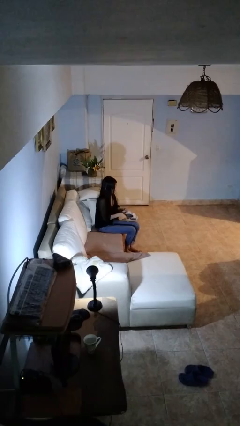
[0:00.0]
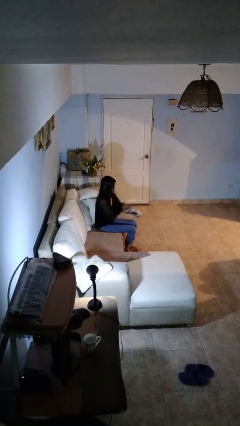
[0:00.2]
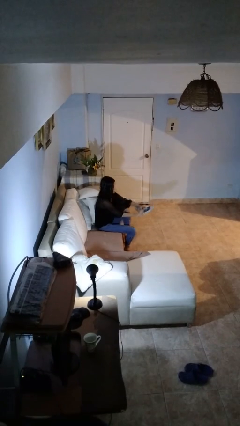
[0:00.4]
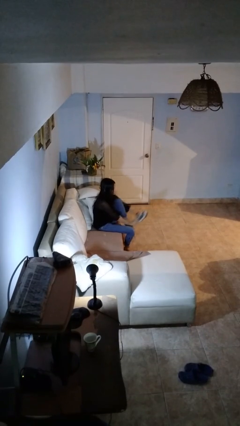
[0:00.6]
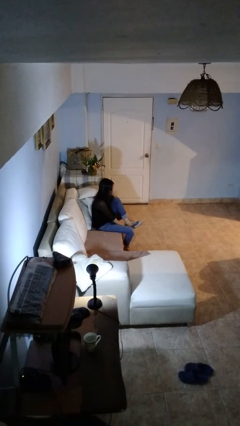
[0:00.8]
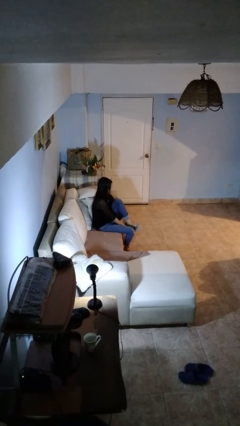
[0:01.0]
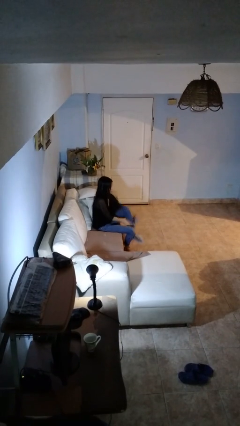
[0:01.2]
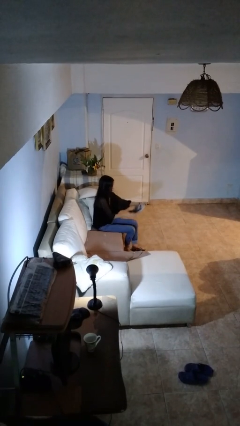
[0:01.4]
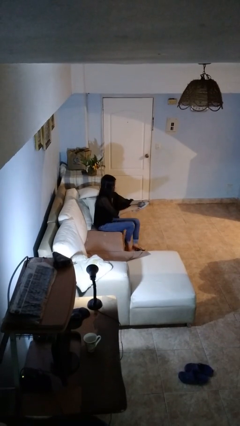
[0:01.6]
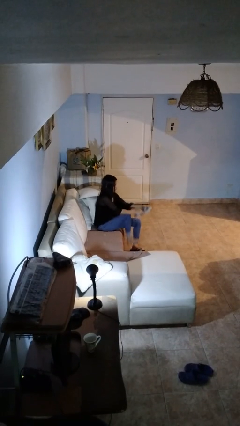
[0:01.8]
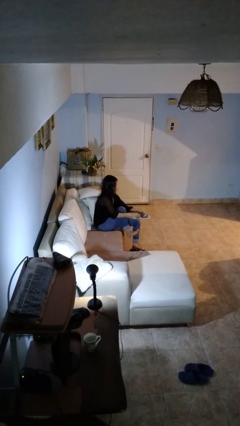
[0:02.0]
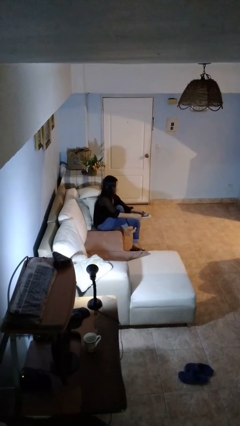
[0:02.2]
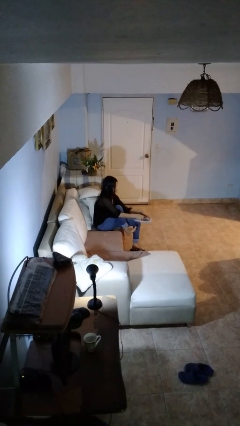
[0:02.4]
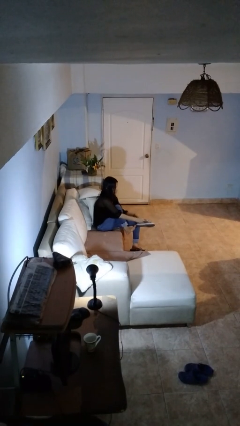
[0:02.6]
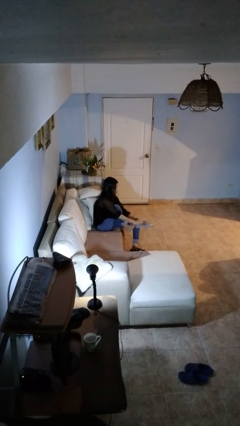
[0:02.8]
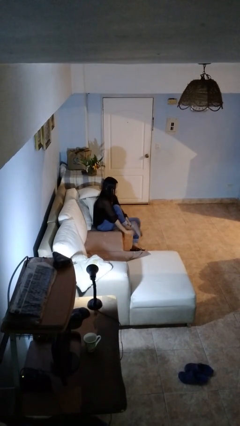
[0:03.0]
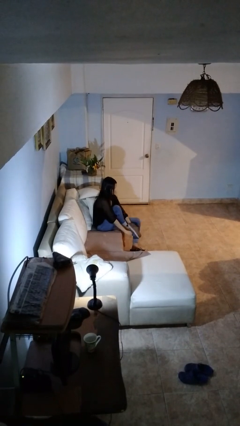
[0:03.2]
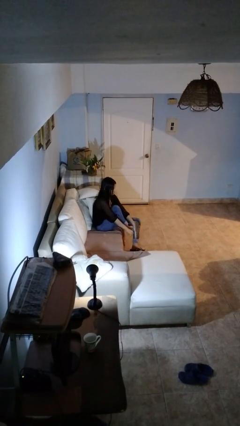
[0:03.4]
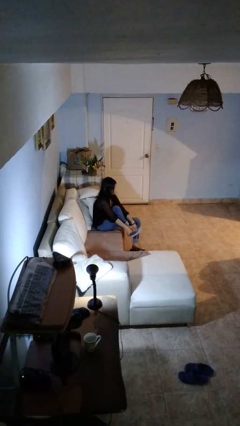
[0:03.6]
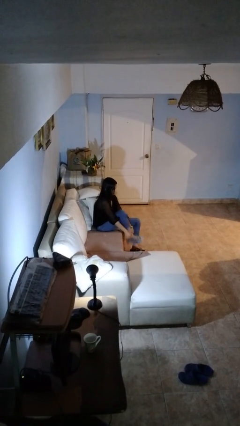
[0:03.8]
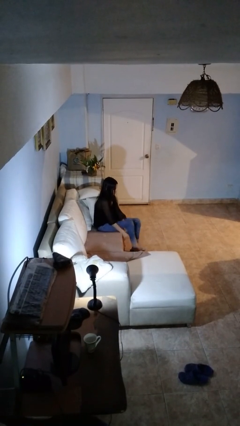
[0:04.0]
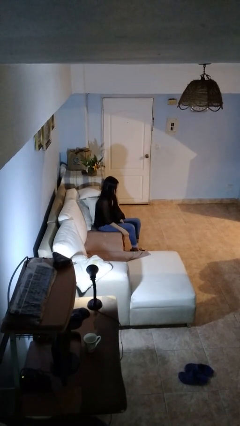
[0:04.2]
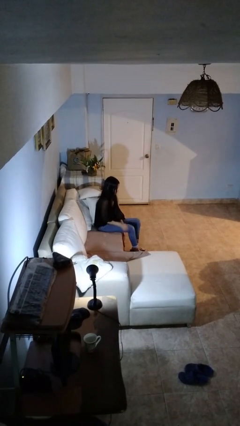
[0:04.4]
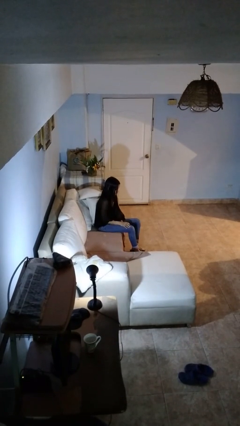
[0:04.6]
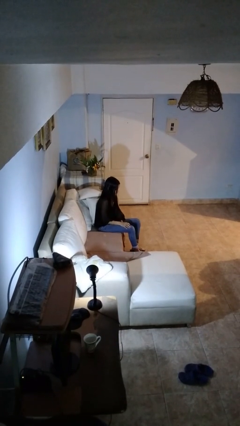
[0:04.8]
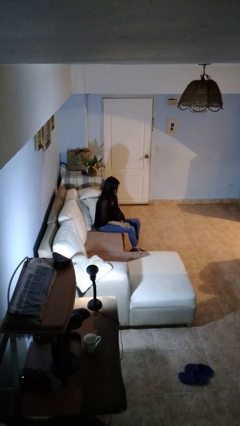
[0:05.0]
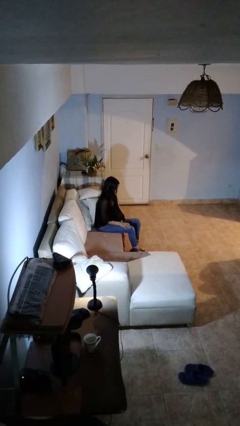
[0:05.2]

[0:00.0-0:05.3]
person puts on shoes

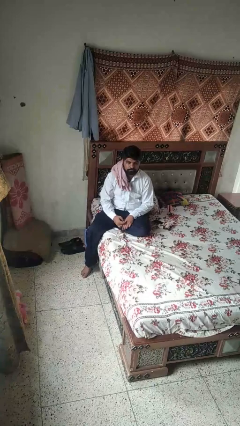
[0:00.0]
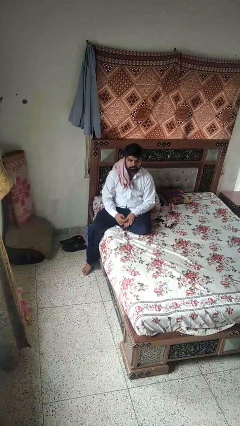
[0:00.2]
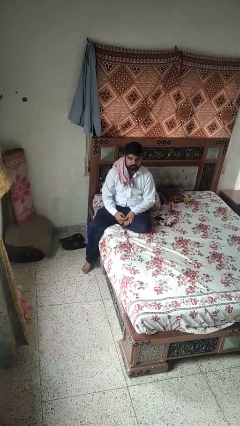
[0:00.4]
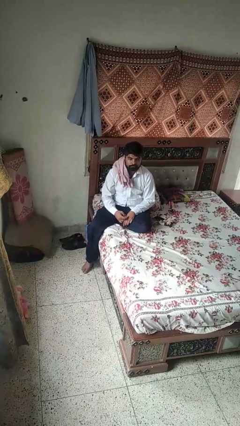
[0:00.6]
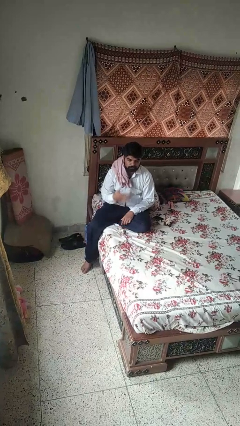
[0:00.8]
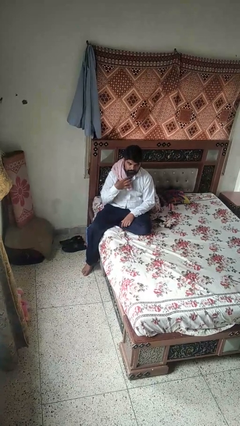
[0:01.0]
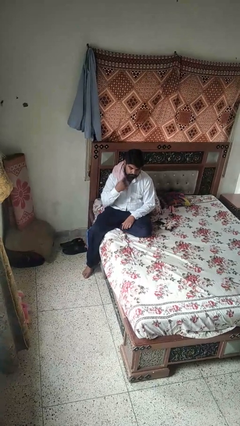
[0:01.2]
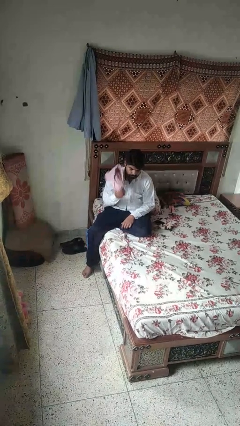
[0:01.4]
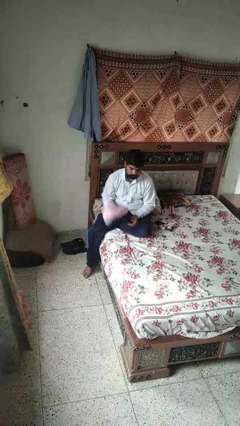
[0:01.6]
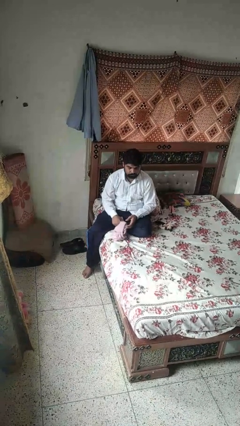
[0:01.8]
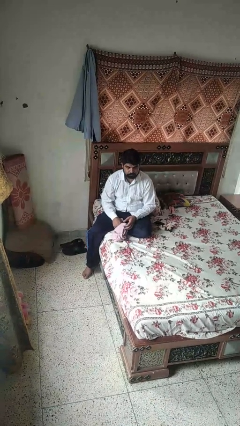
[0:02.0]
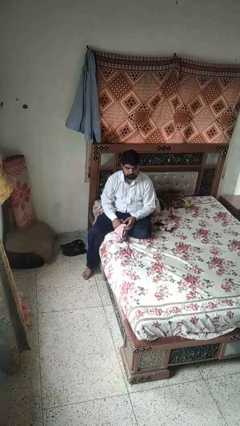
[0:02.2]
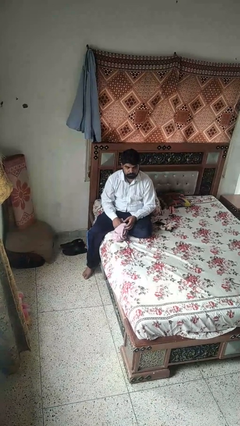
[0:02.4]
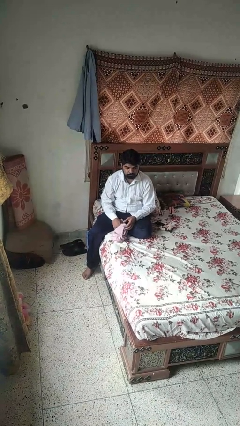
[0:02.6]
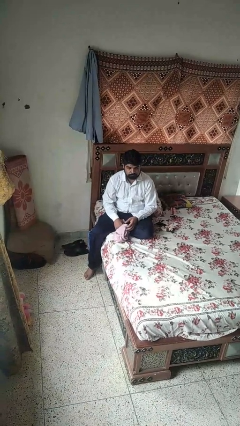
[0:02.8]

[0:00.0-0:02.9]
person takes off scarf

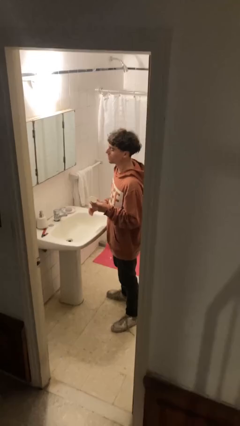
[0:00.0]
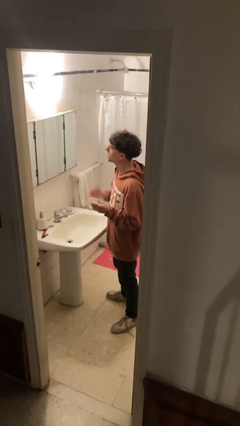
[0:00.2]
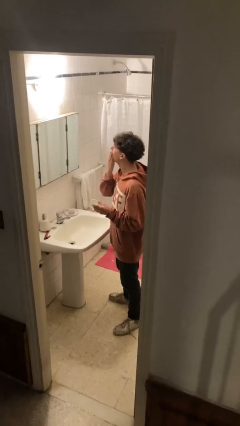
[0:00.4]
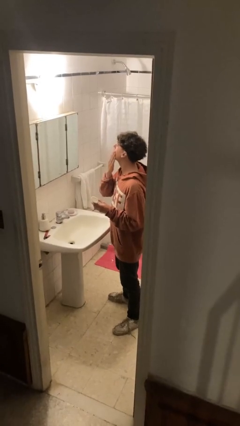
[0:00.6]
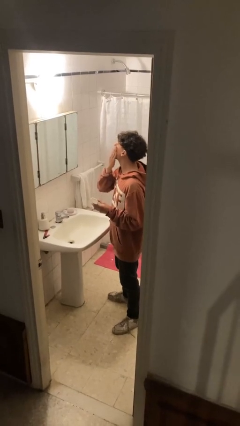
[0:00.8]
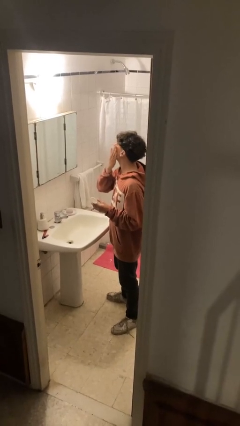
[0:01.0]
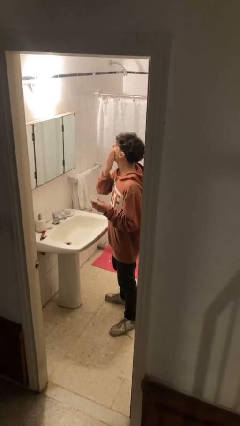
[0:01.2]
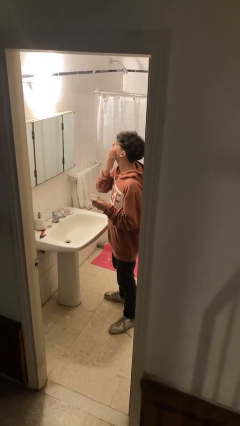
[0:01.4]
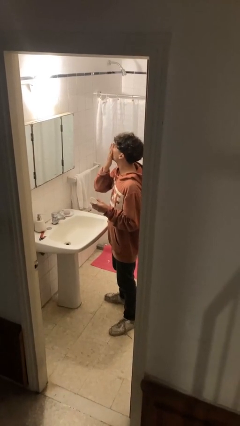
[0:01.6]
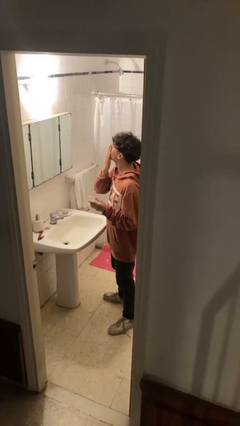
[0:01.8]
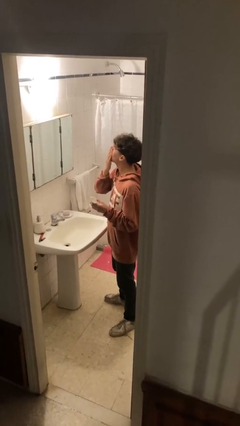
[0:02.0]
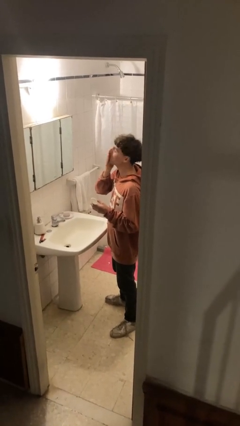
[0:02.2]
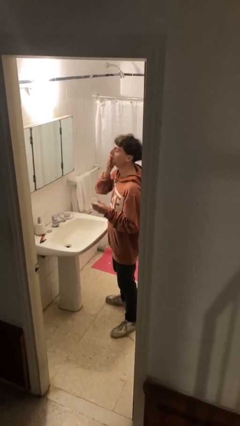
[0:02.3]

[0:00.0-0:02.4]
person applies foundation makeup

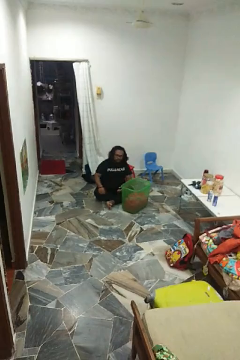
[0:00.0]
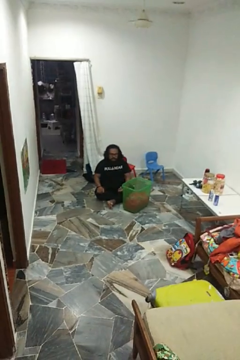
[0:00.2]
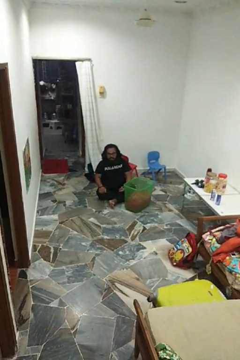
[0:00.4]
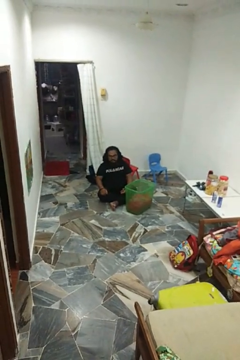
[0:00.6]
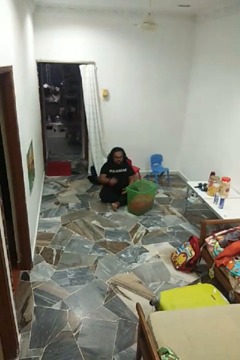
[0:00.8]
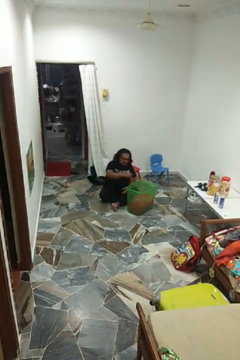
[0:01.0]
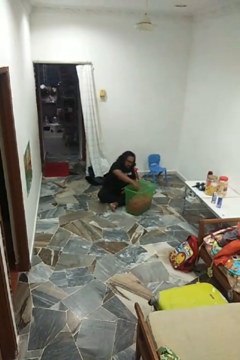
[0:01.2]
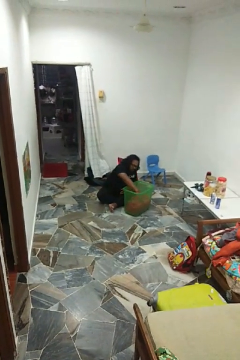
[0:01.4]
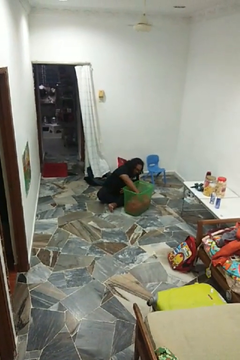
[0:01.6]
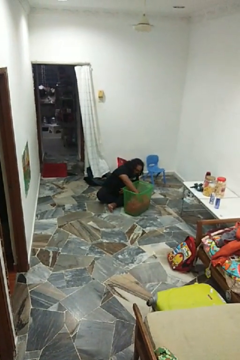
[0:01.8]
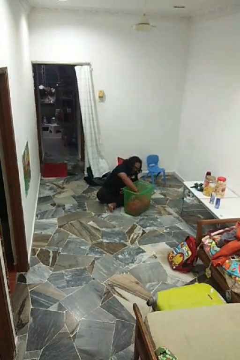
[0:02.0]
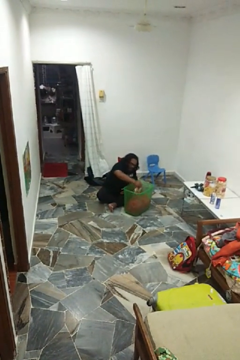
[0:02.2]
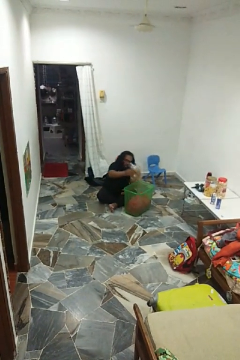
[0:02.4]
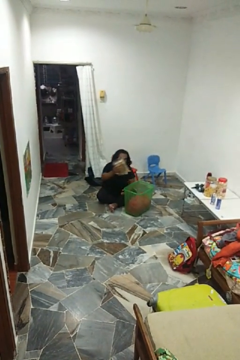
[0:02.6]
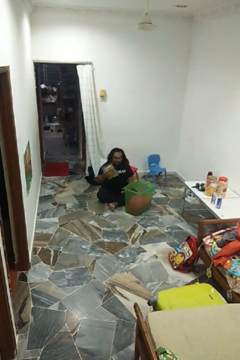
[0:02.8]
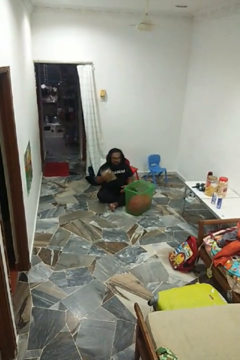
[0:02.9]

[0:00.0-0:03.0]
person takes object from basket

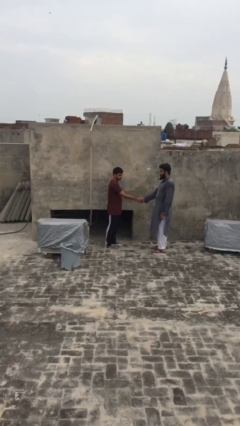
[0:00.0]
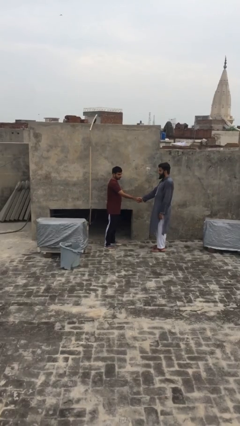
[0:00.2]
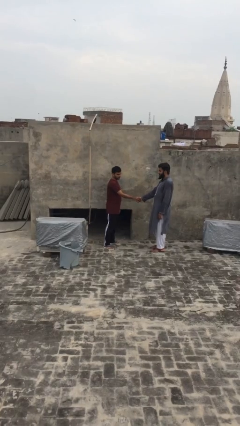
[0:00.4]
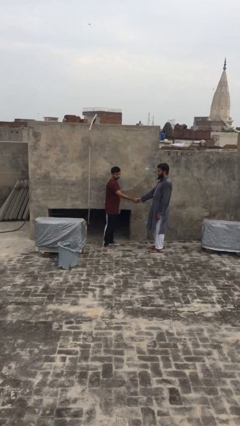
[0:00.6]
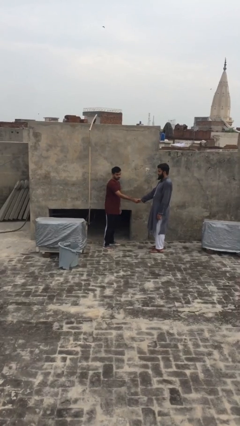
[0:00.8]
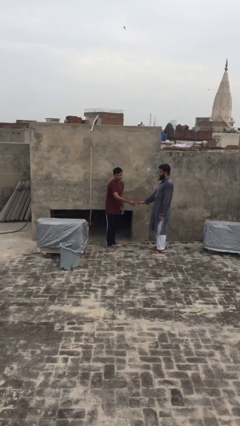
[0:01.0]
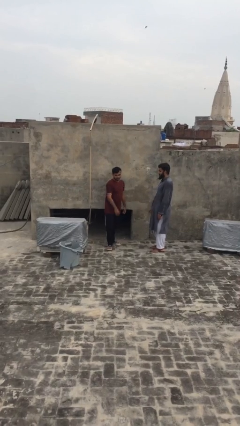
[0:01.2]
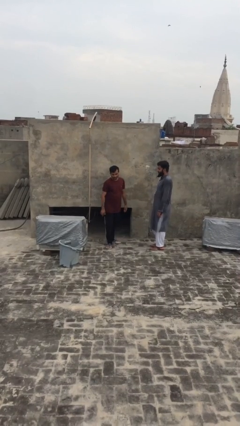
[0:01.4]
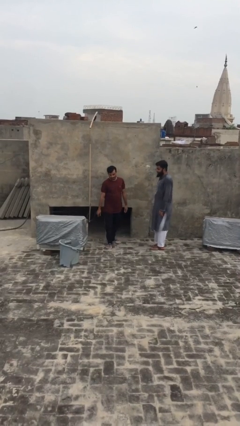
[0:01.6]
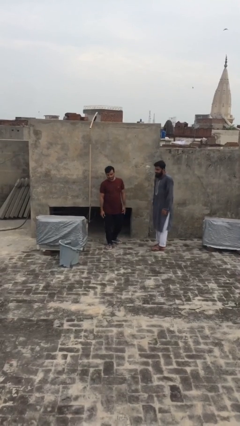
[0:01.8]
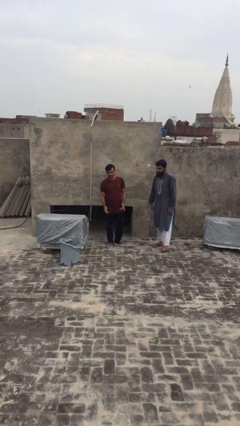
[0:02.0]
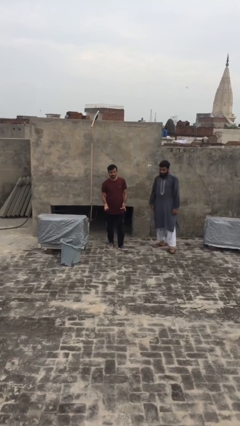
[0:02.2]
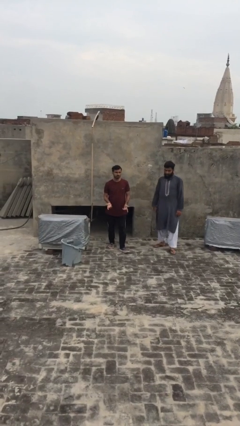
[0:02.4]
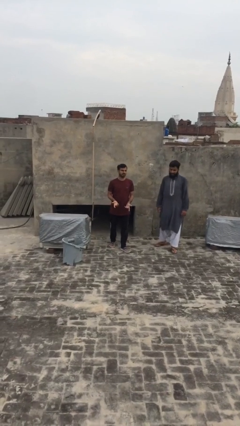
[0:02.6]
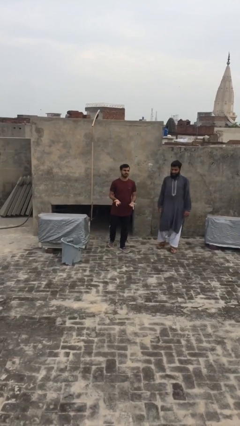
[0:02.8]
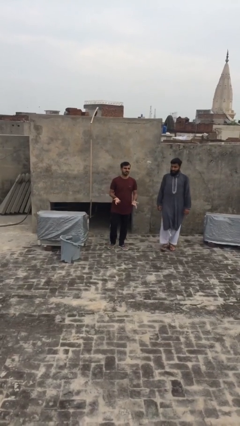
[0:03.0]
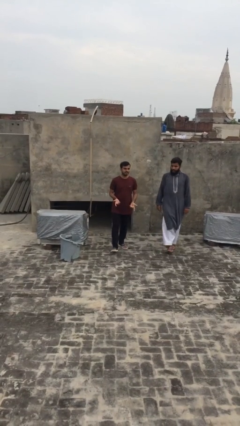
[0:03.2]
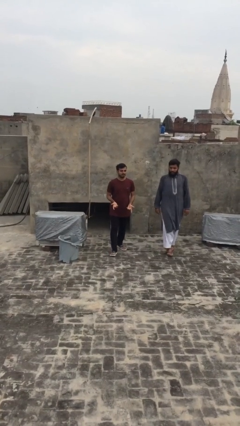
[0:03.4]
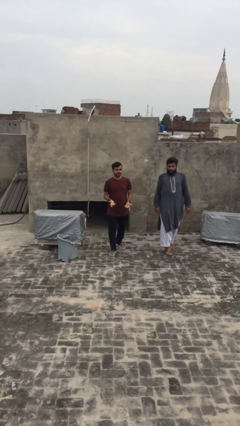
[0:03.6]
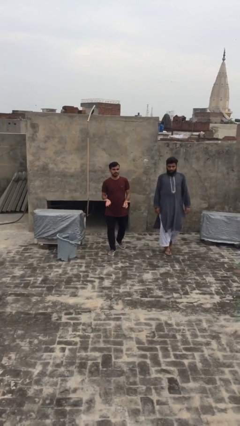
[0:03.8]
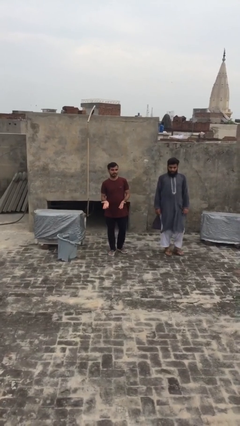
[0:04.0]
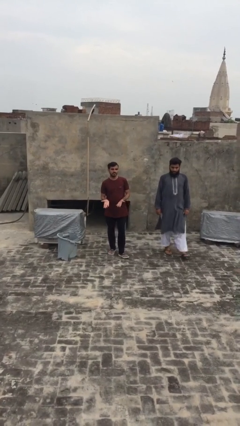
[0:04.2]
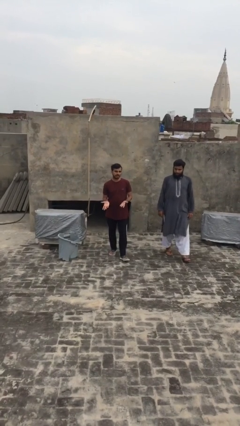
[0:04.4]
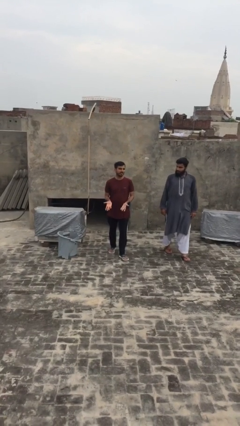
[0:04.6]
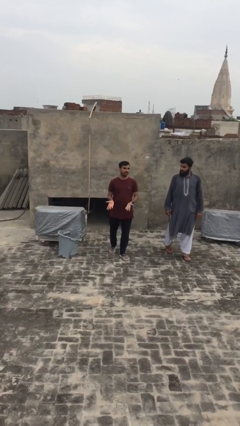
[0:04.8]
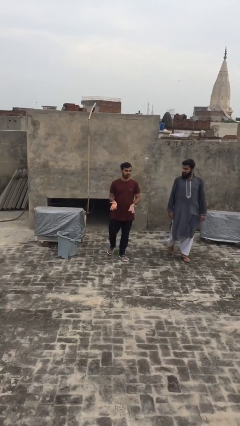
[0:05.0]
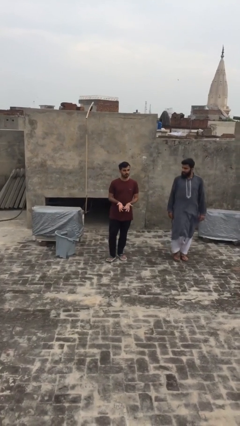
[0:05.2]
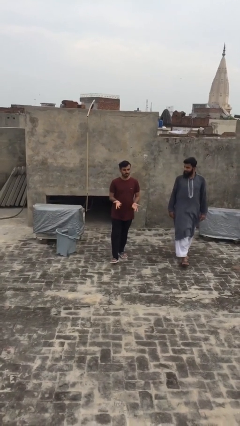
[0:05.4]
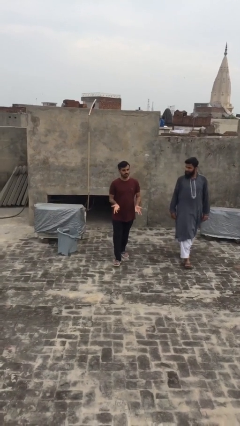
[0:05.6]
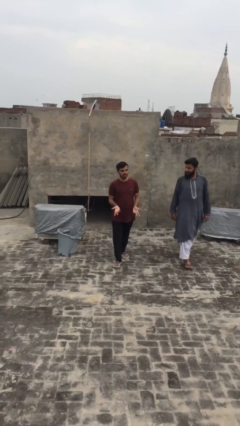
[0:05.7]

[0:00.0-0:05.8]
person talks to person
